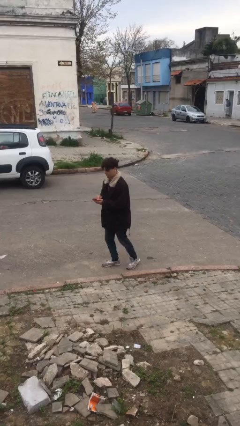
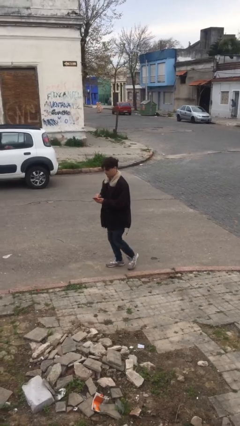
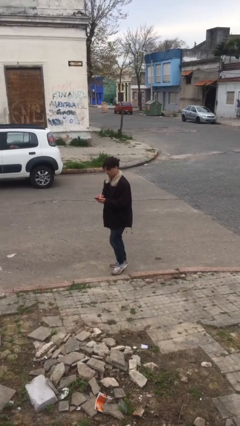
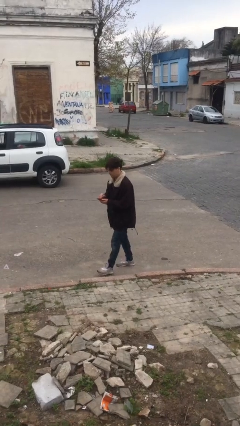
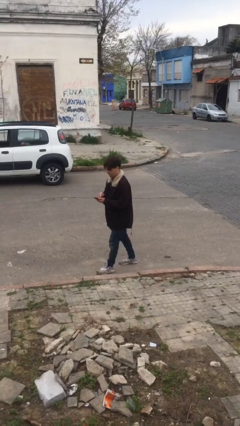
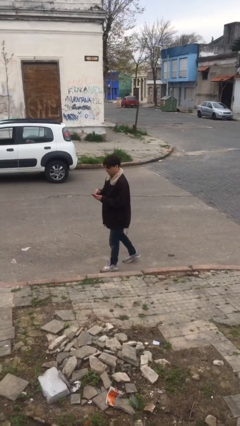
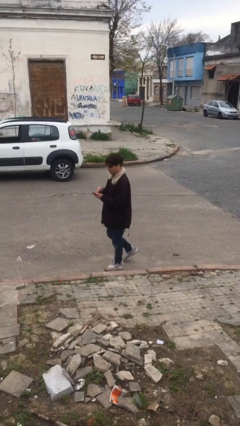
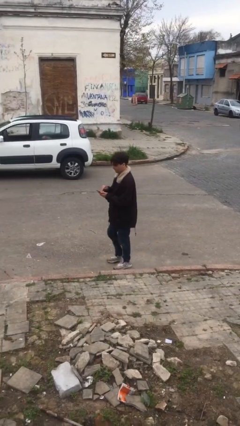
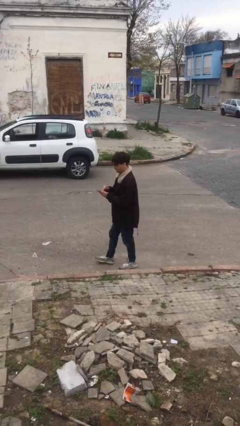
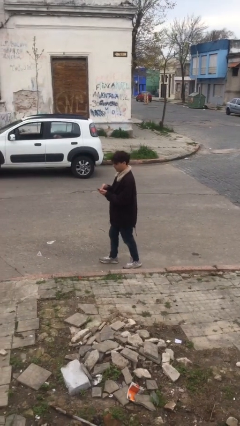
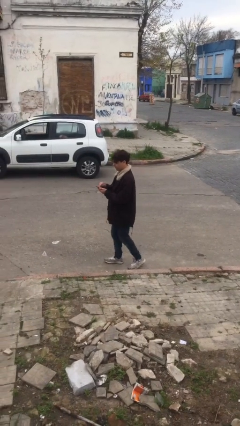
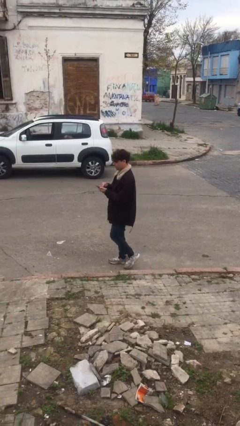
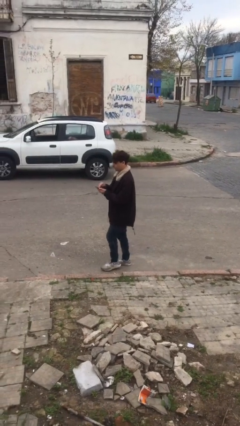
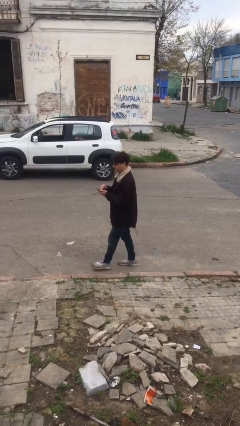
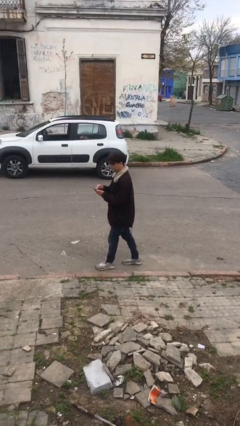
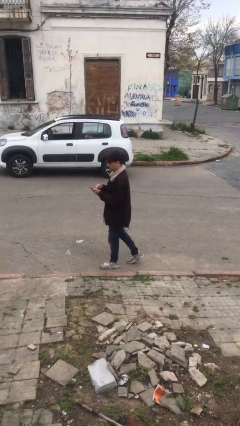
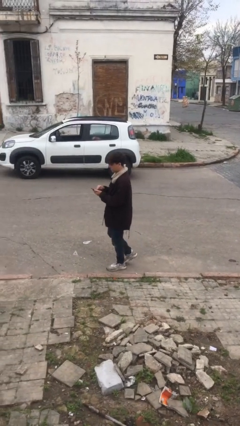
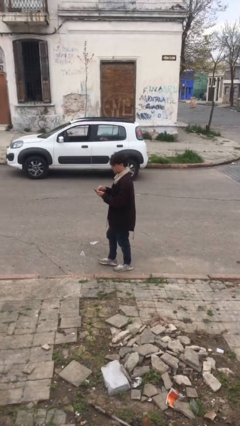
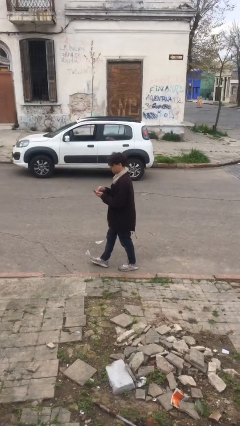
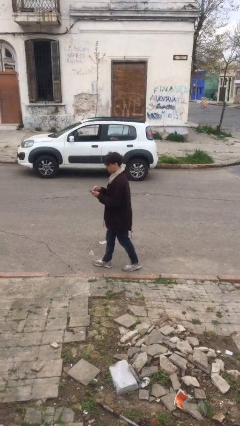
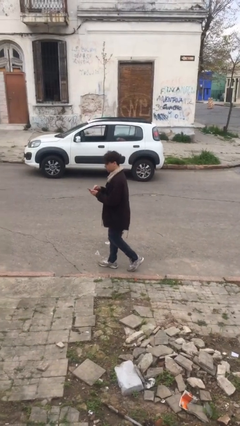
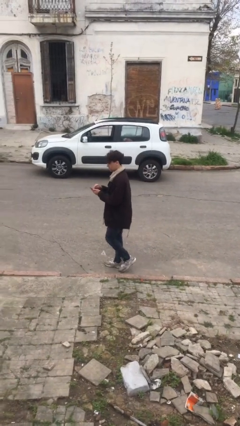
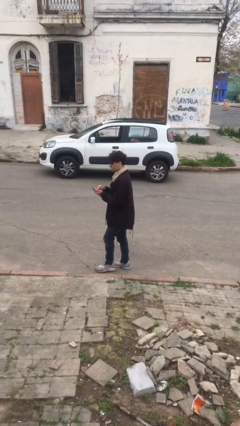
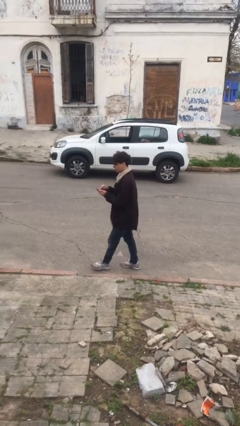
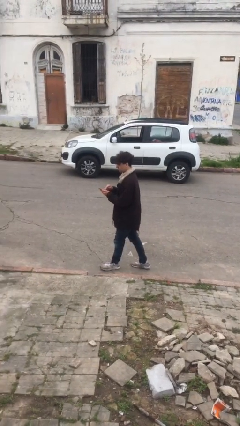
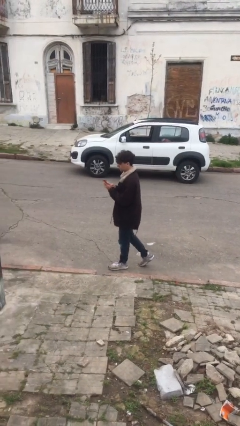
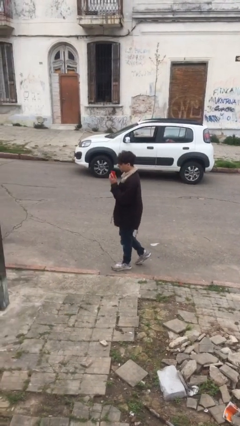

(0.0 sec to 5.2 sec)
person texts on phone

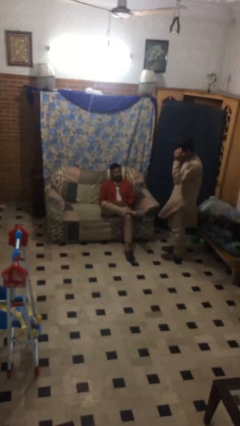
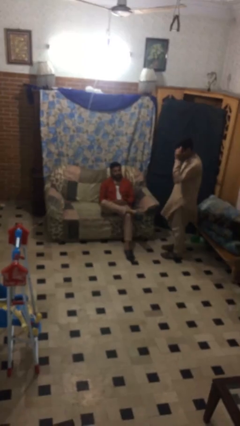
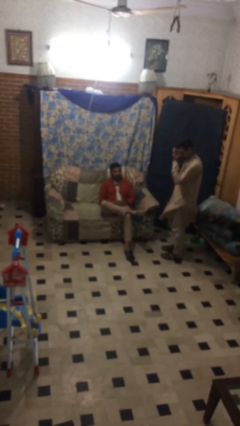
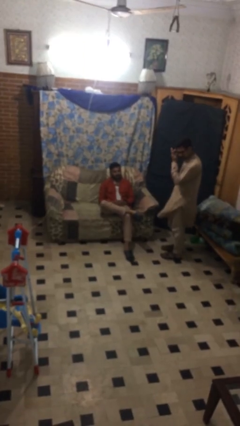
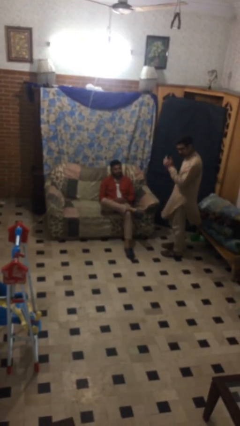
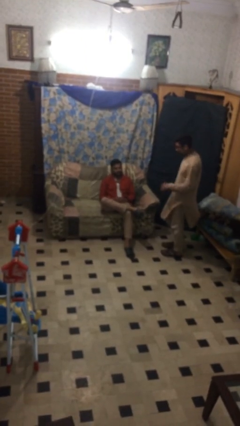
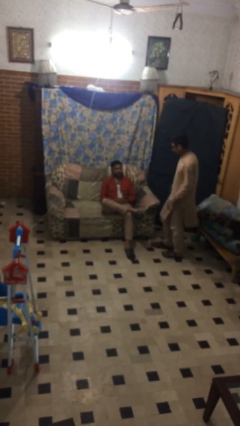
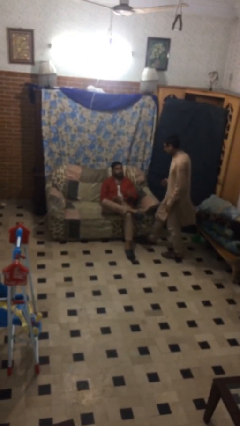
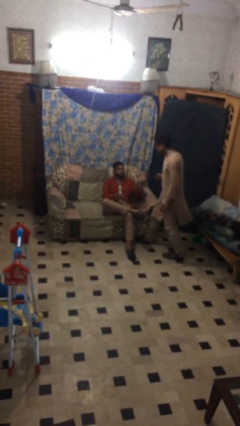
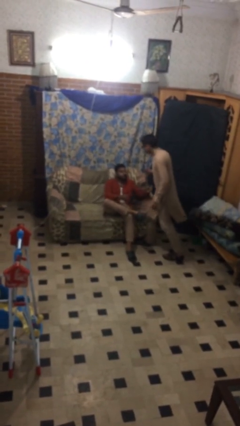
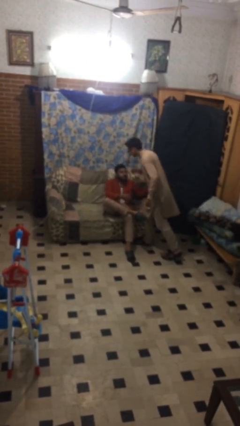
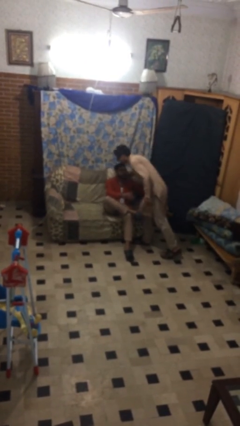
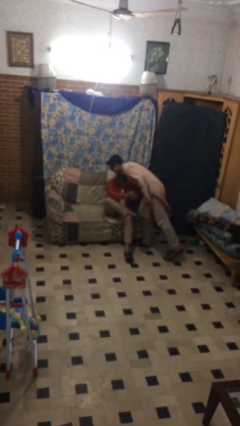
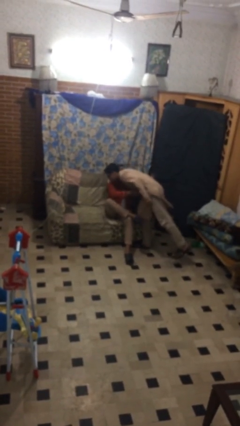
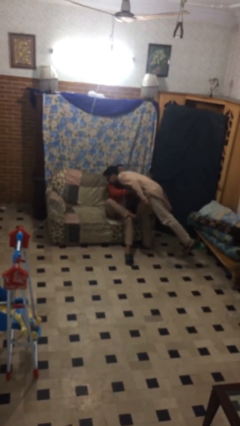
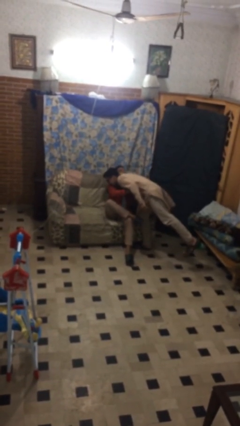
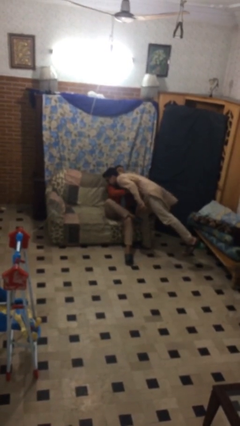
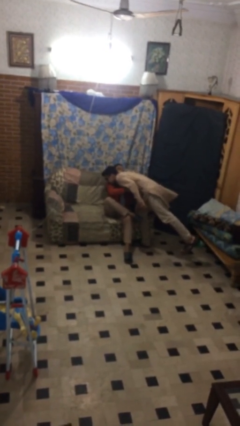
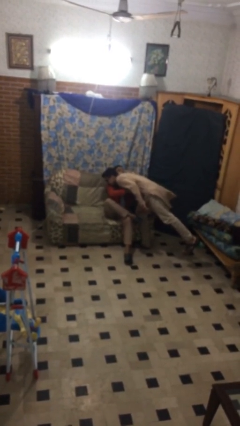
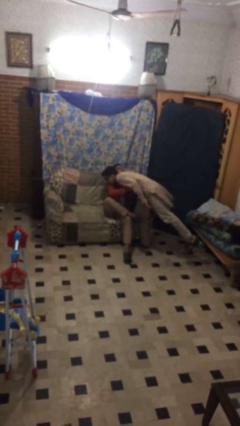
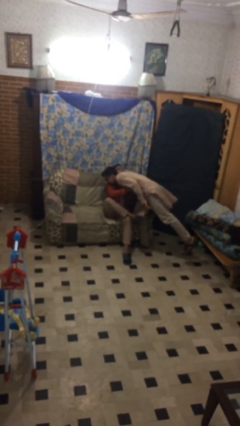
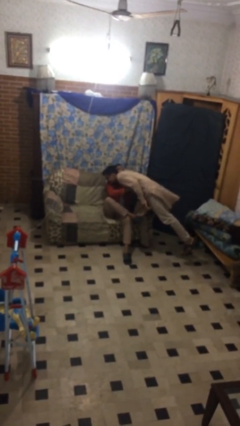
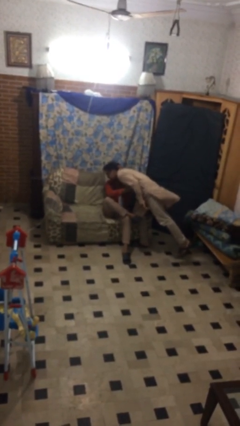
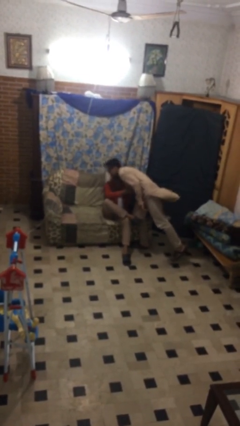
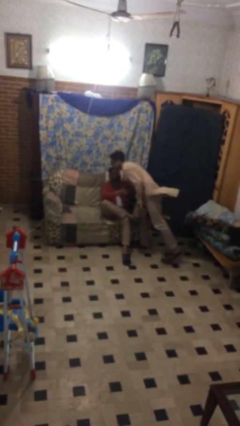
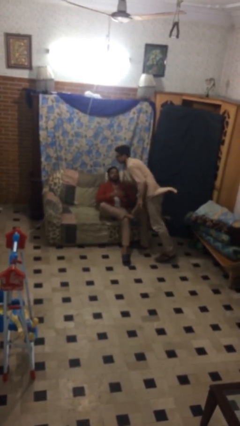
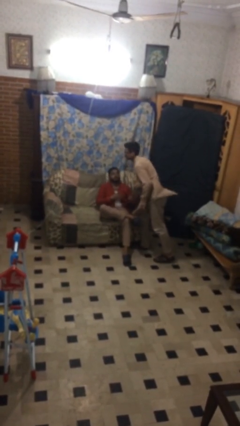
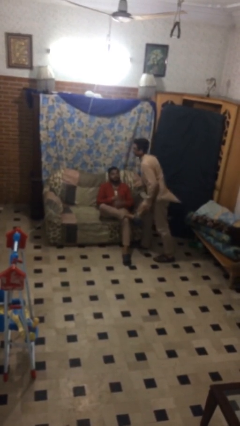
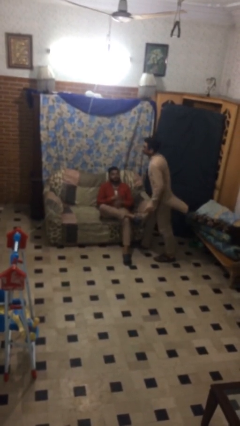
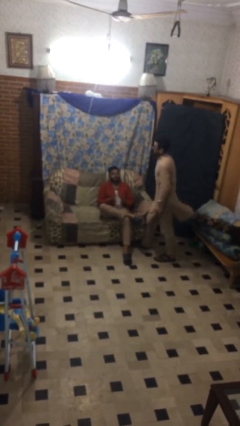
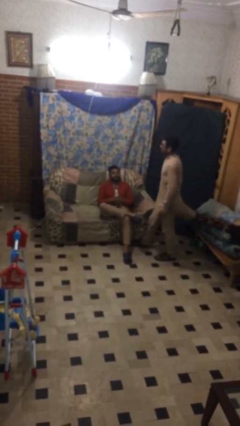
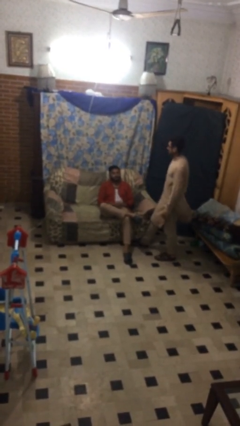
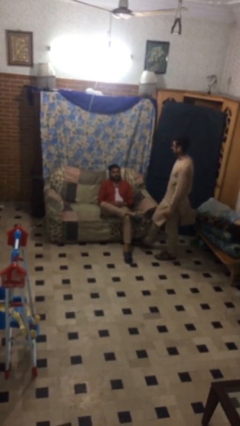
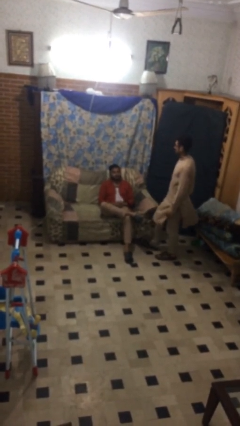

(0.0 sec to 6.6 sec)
person embraces person

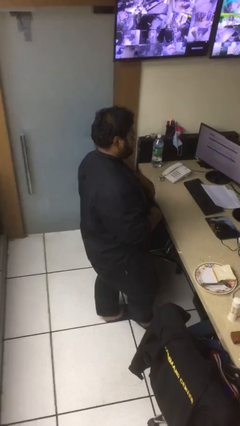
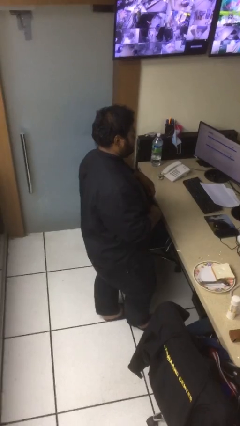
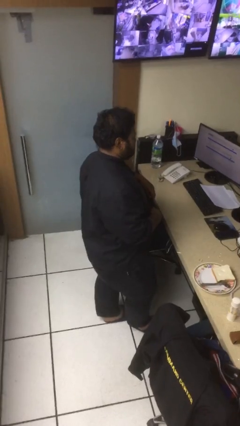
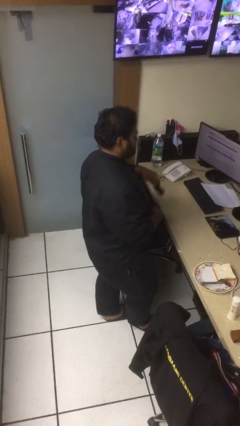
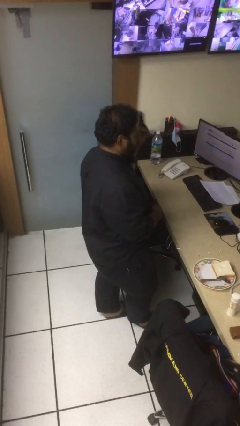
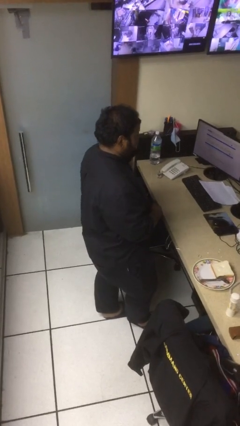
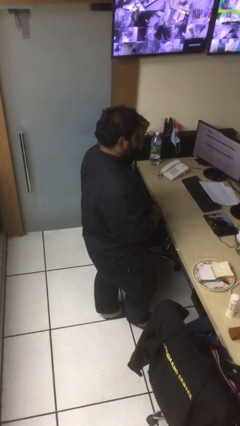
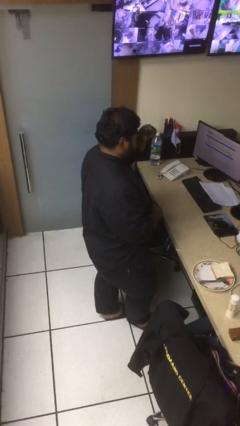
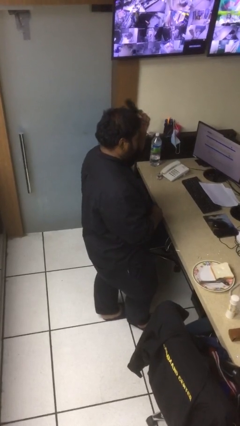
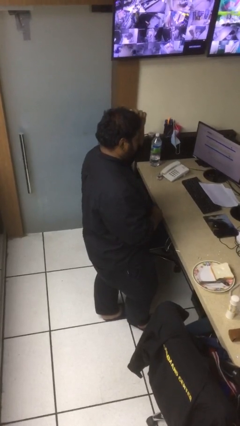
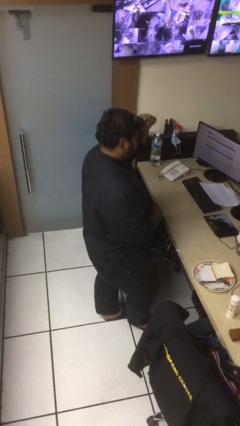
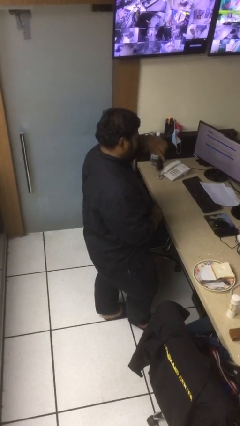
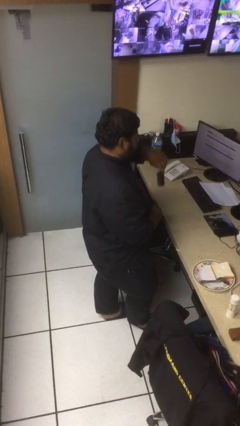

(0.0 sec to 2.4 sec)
person brushes hair

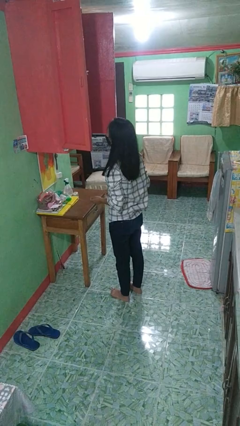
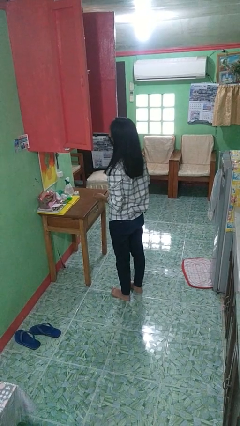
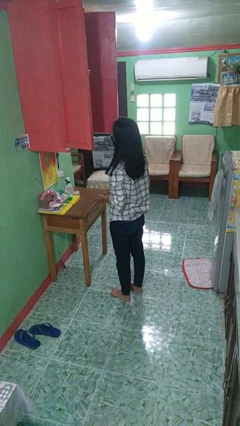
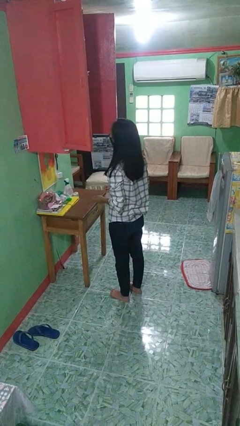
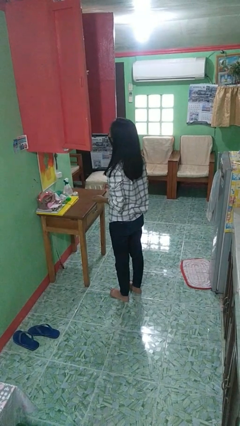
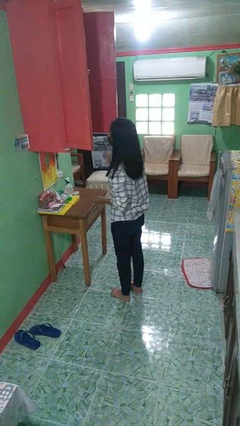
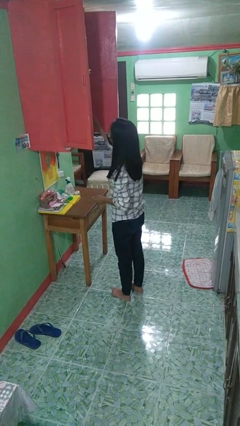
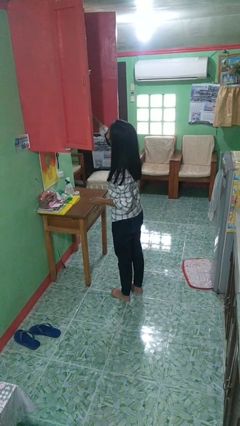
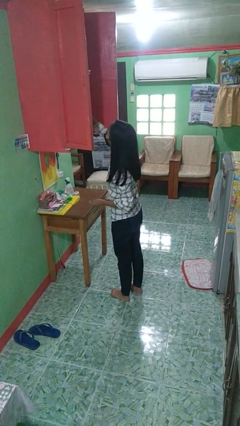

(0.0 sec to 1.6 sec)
person picks up object from cabinet

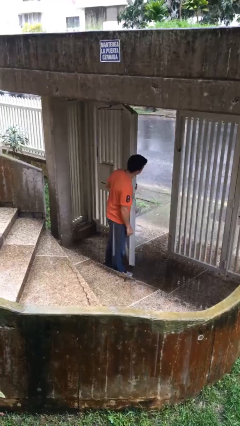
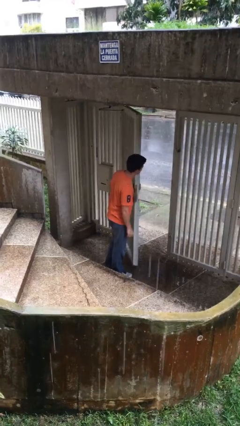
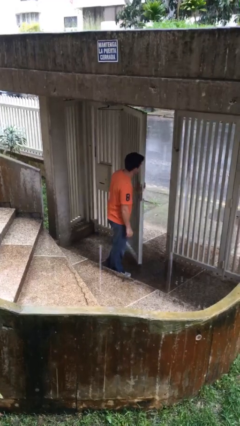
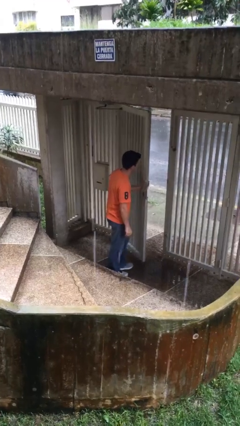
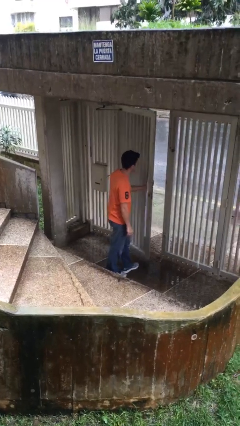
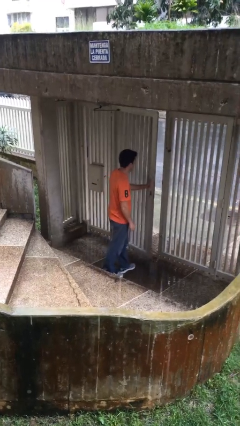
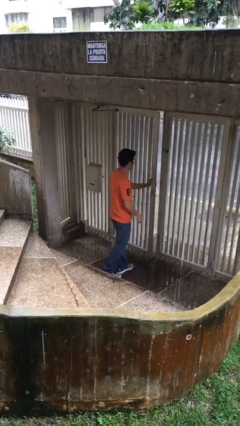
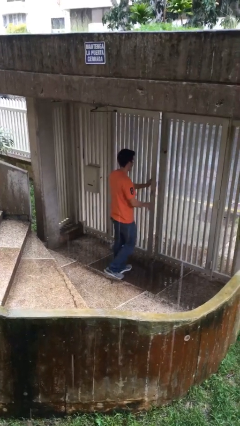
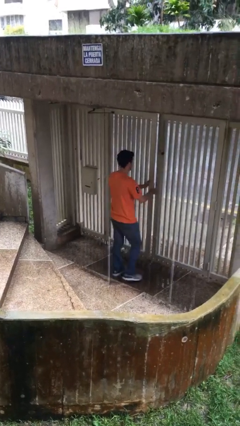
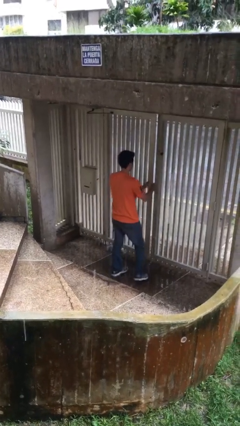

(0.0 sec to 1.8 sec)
person closes facility door

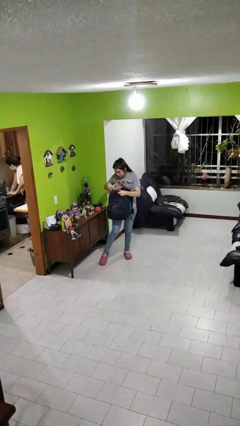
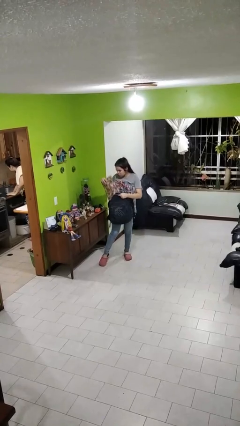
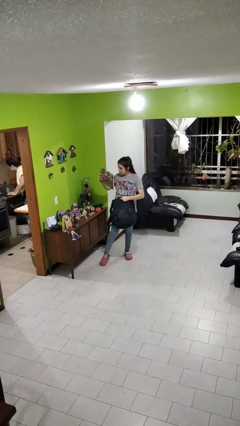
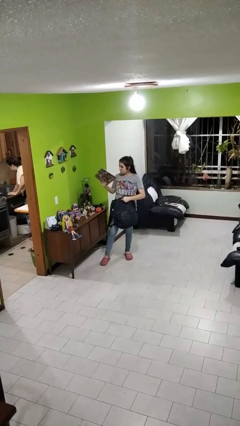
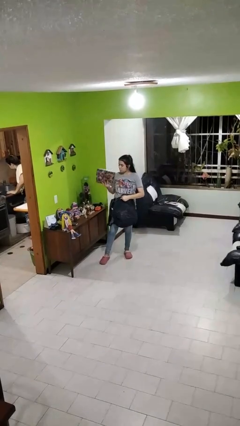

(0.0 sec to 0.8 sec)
person takes object from backpack
